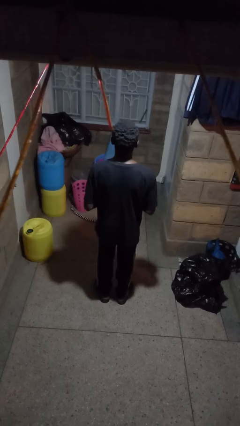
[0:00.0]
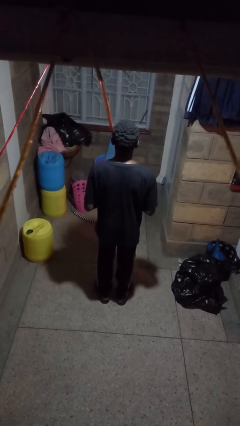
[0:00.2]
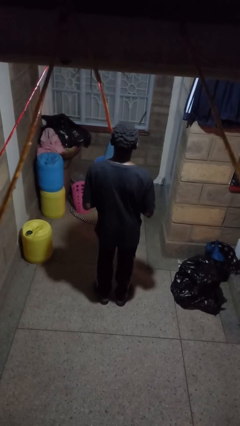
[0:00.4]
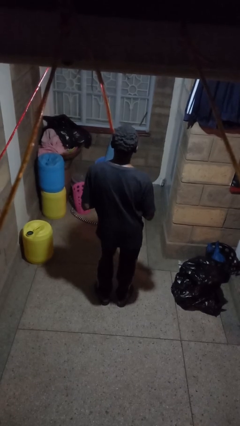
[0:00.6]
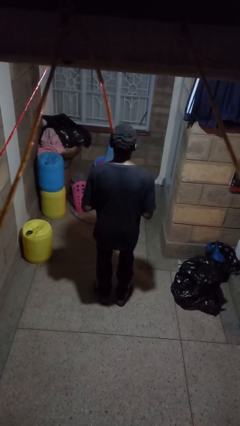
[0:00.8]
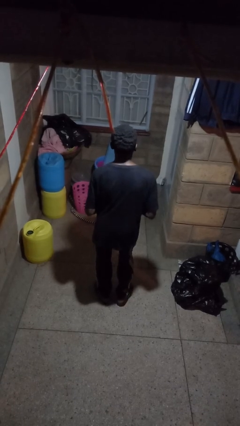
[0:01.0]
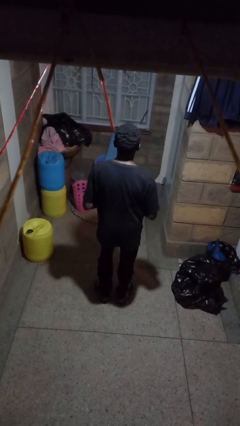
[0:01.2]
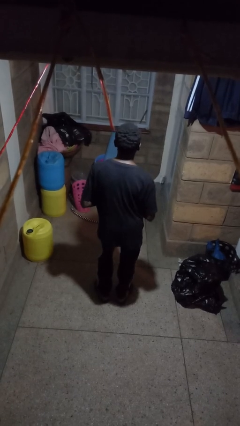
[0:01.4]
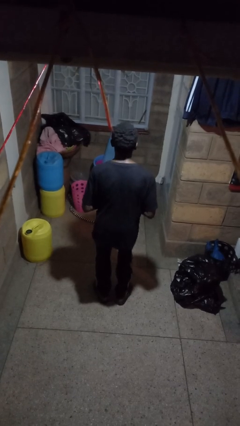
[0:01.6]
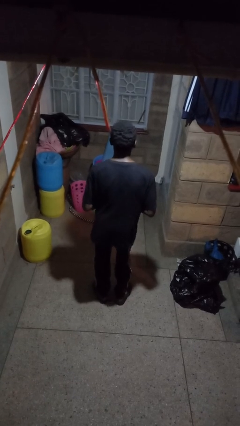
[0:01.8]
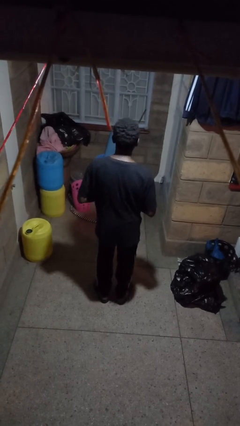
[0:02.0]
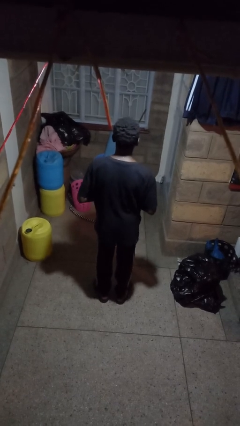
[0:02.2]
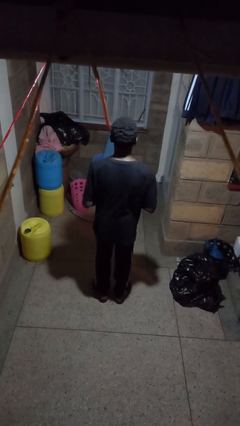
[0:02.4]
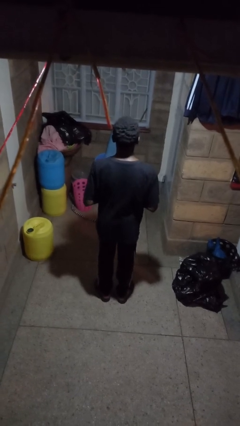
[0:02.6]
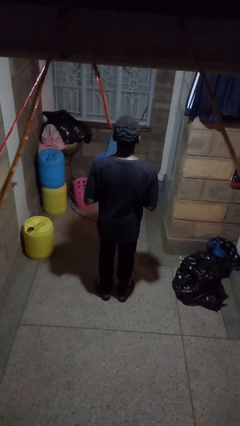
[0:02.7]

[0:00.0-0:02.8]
person wiggles hips

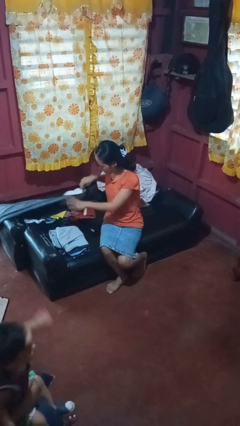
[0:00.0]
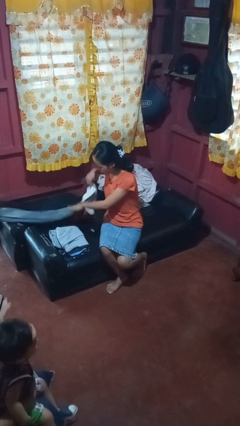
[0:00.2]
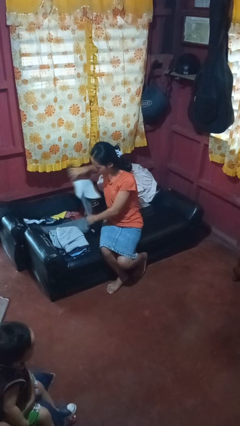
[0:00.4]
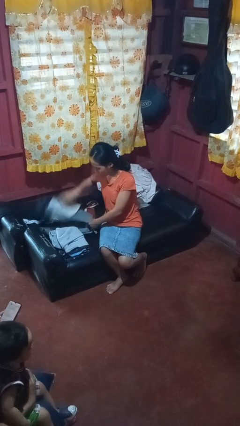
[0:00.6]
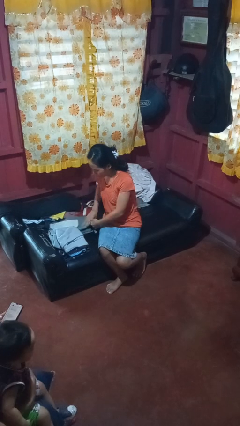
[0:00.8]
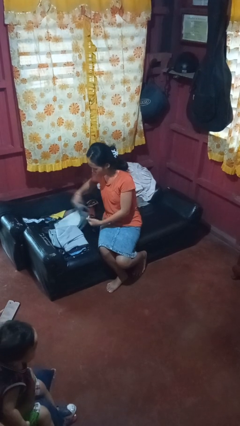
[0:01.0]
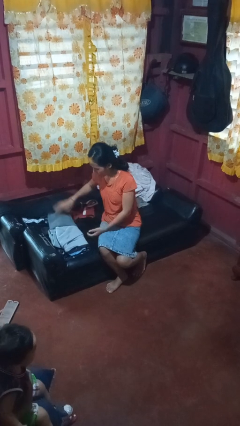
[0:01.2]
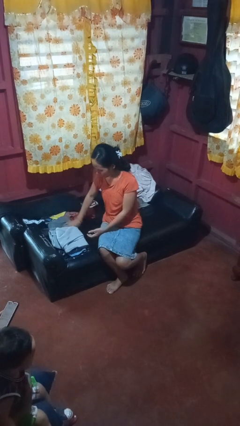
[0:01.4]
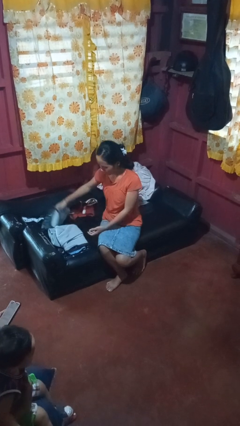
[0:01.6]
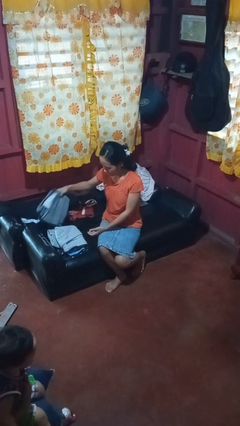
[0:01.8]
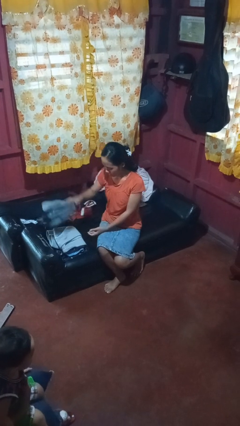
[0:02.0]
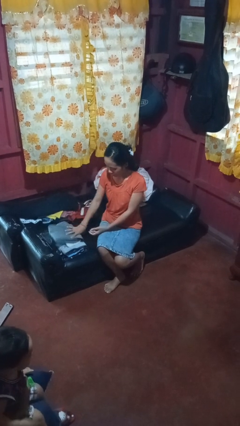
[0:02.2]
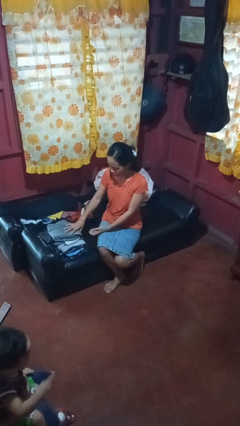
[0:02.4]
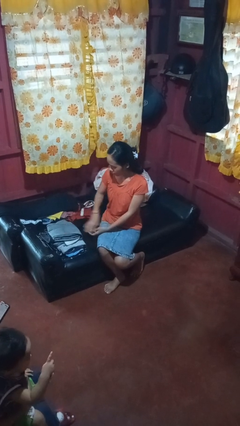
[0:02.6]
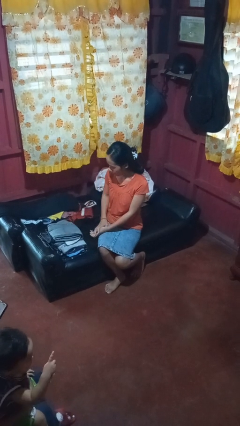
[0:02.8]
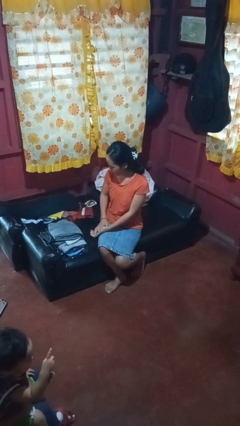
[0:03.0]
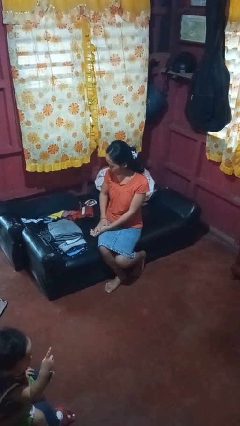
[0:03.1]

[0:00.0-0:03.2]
person folds pants

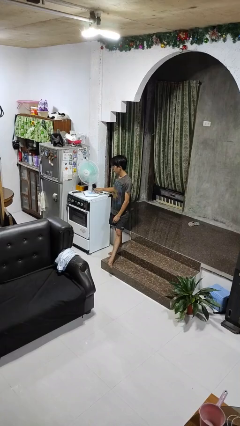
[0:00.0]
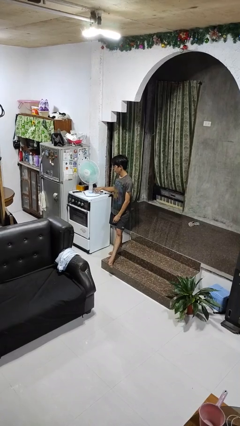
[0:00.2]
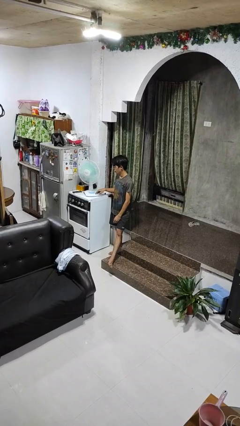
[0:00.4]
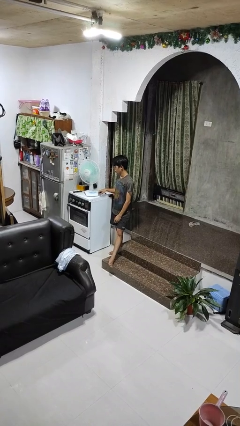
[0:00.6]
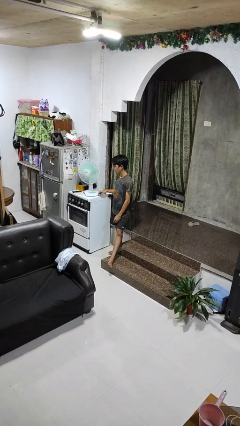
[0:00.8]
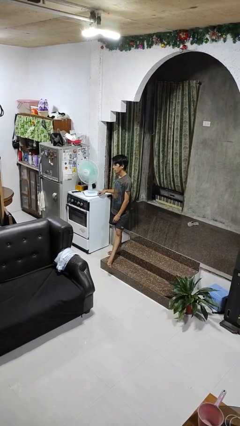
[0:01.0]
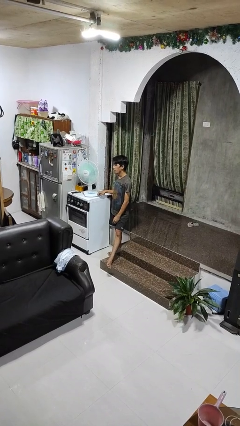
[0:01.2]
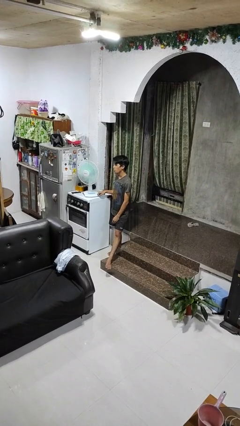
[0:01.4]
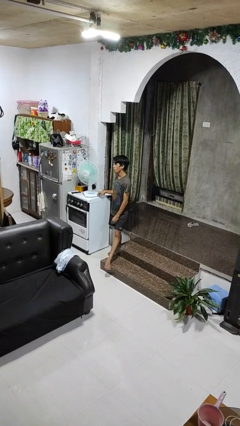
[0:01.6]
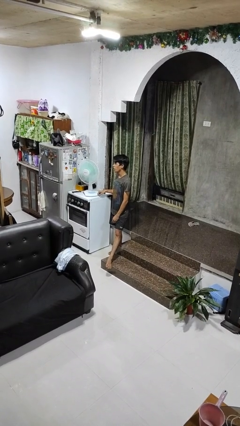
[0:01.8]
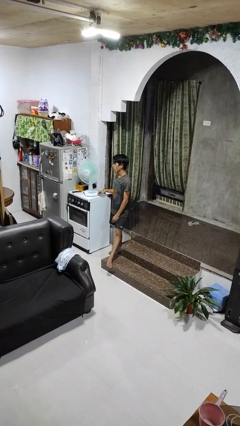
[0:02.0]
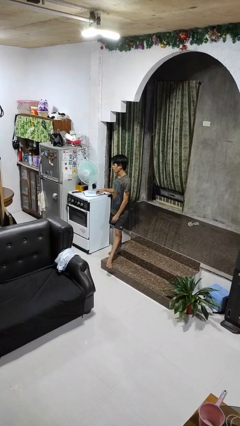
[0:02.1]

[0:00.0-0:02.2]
person turns on fan

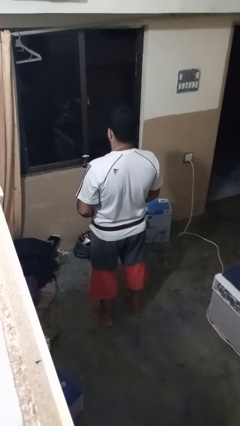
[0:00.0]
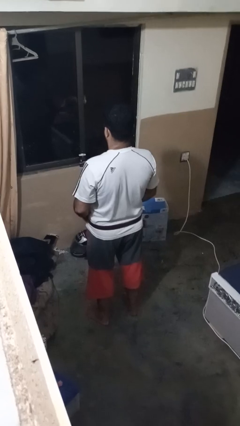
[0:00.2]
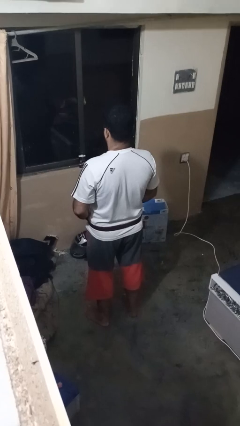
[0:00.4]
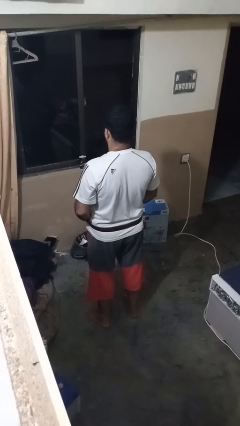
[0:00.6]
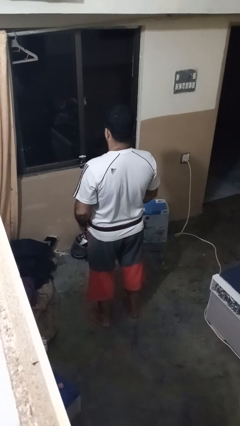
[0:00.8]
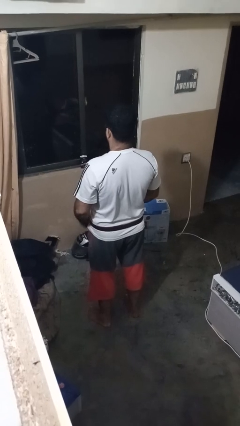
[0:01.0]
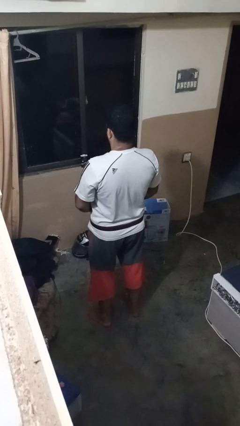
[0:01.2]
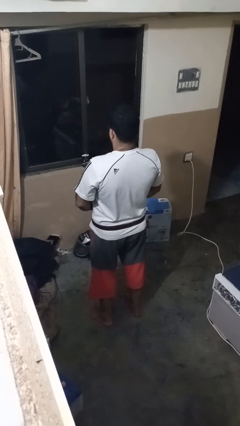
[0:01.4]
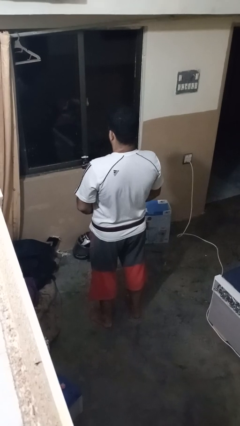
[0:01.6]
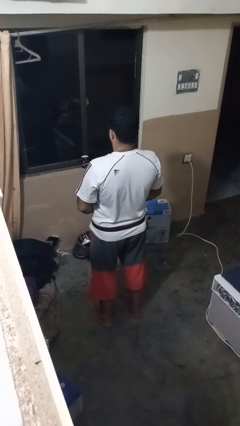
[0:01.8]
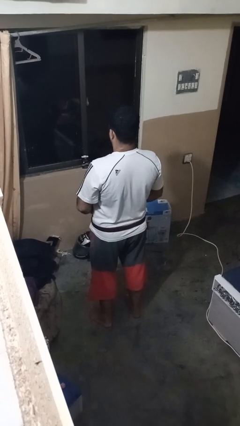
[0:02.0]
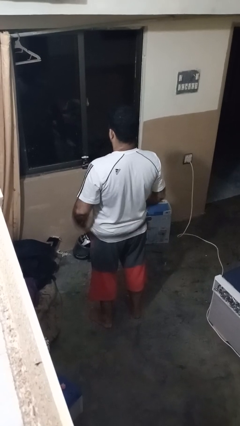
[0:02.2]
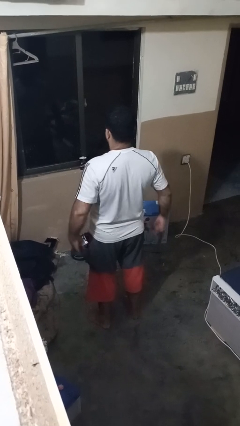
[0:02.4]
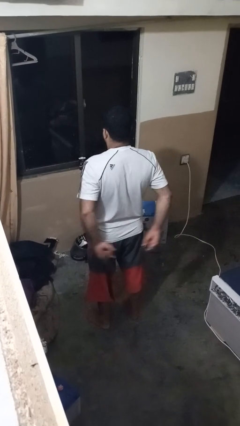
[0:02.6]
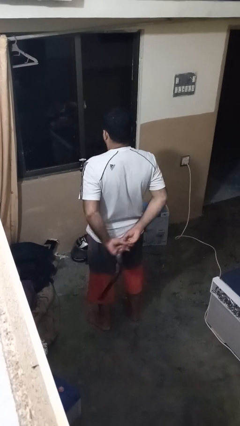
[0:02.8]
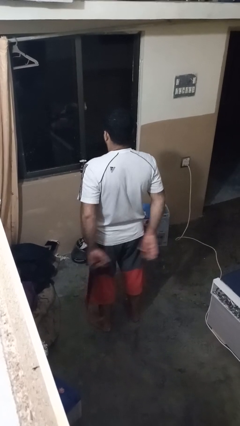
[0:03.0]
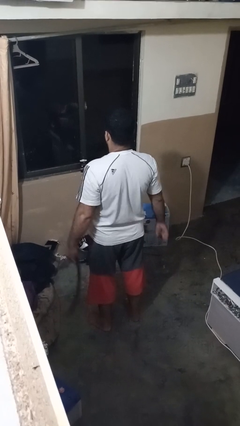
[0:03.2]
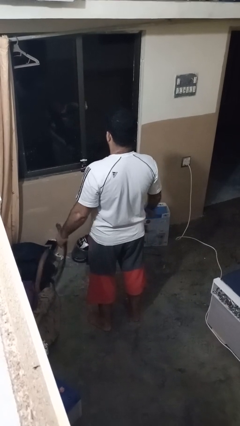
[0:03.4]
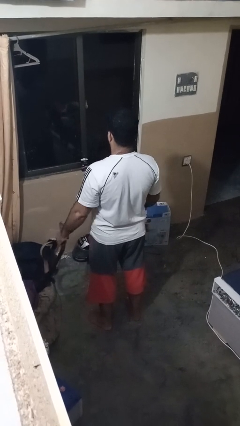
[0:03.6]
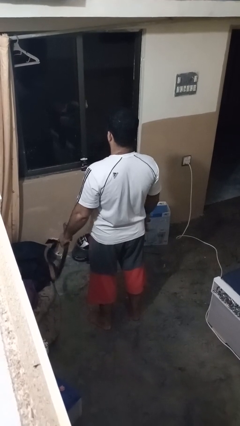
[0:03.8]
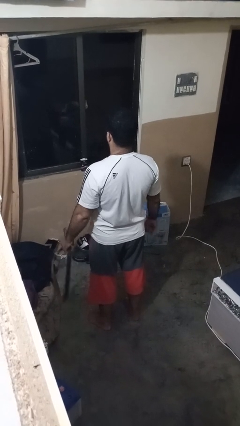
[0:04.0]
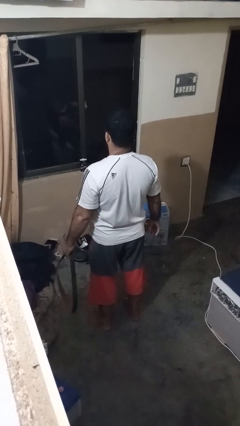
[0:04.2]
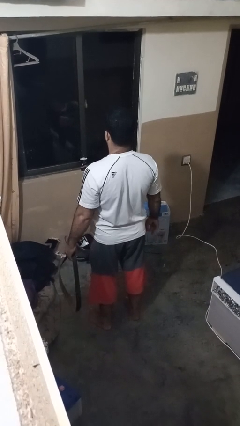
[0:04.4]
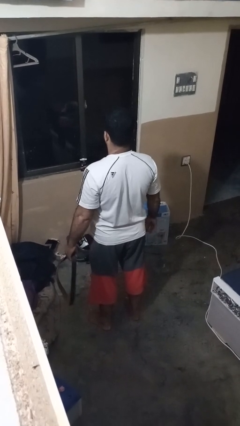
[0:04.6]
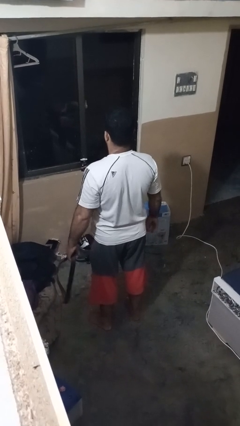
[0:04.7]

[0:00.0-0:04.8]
person takes off belt

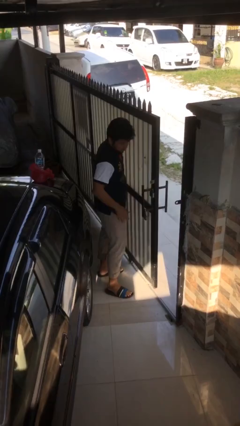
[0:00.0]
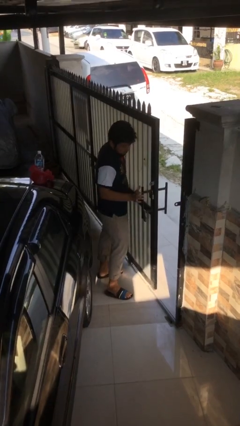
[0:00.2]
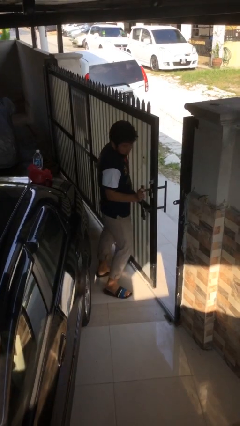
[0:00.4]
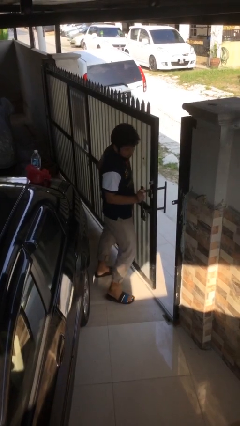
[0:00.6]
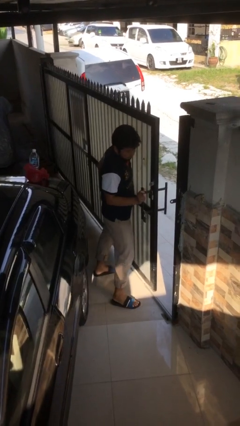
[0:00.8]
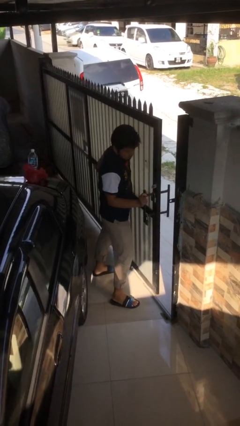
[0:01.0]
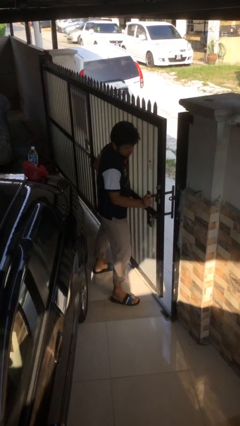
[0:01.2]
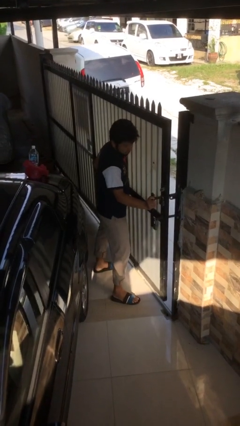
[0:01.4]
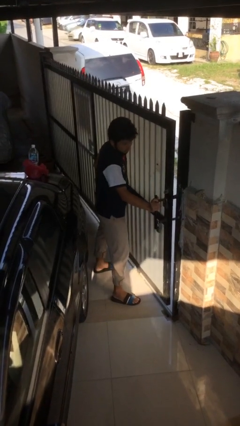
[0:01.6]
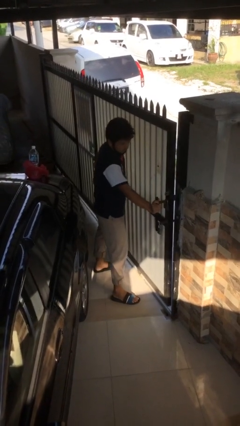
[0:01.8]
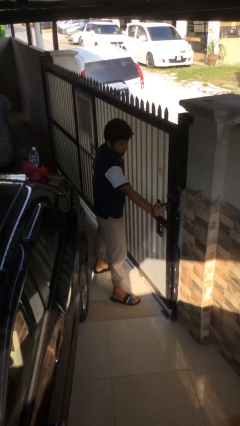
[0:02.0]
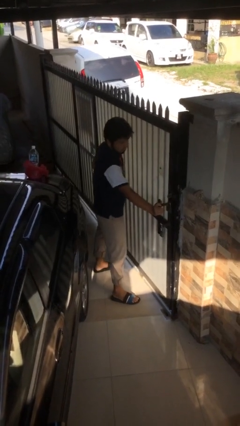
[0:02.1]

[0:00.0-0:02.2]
person closes sliding door

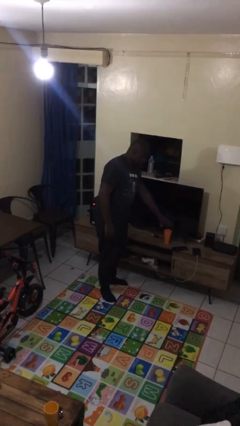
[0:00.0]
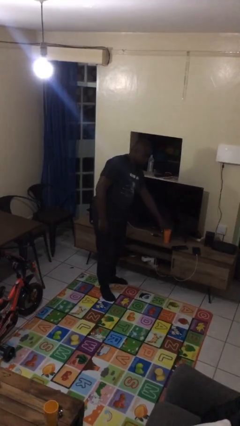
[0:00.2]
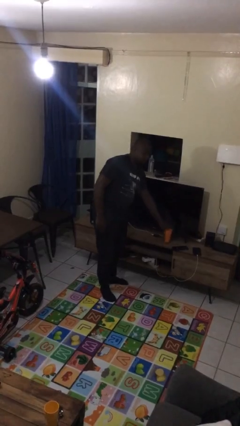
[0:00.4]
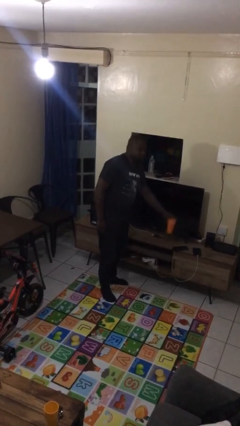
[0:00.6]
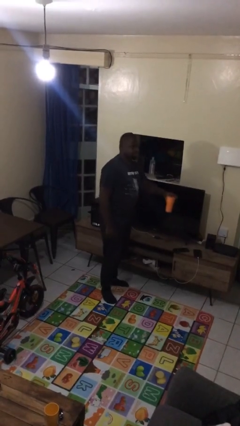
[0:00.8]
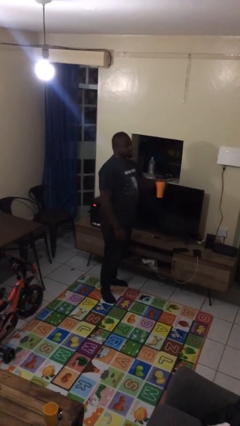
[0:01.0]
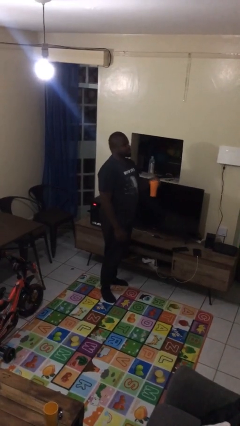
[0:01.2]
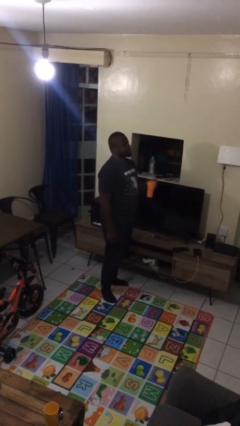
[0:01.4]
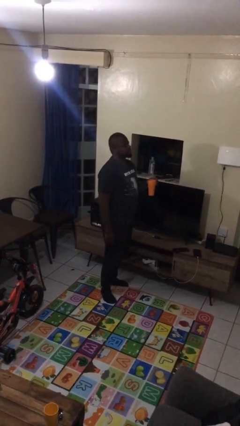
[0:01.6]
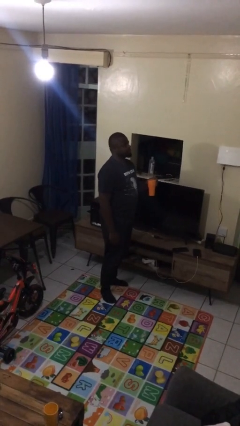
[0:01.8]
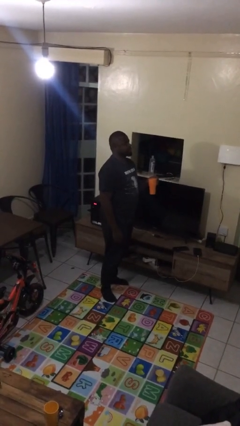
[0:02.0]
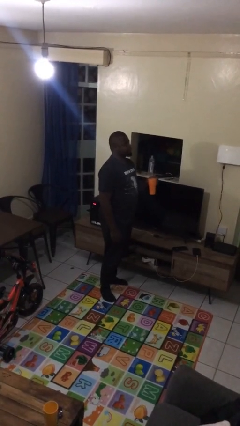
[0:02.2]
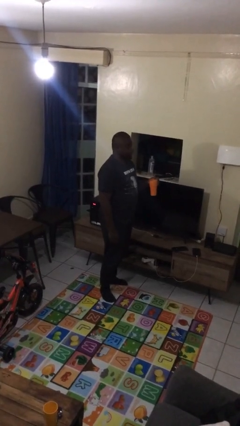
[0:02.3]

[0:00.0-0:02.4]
person picks up object from countertop
